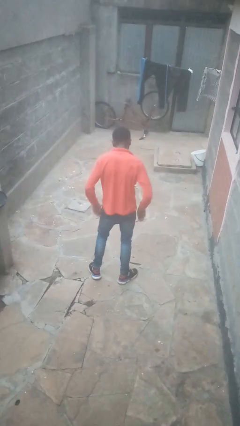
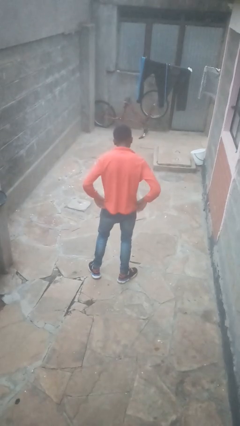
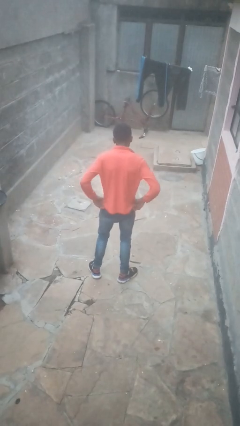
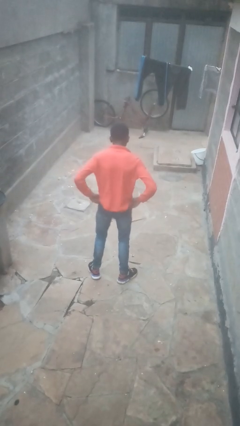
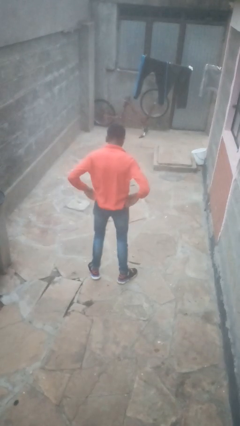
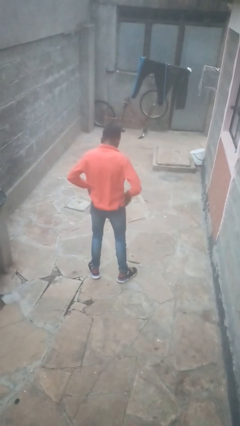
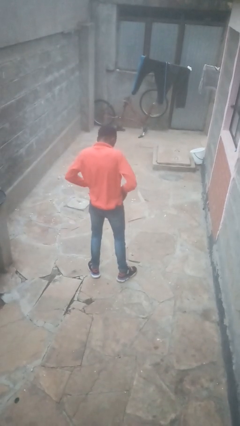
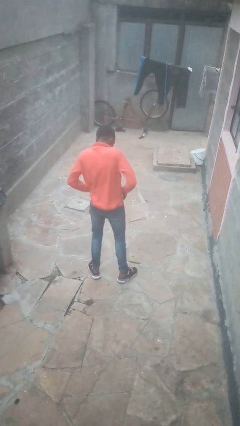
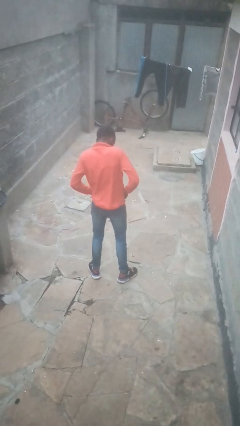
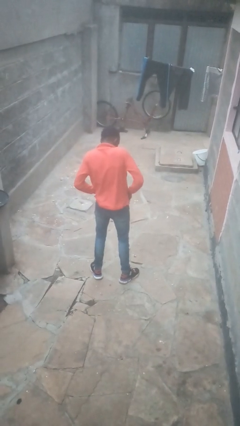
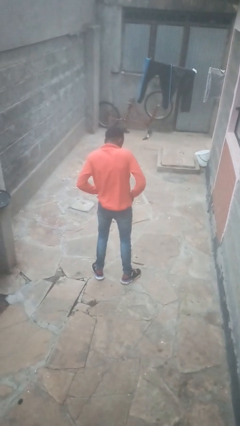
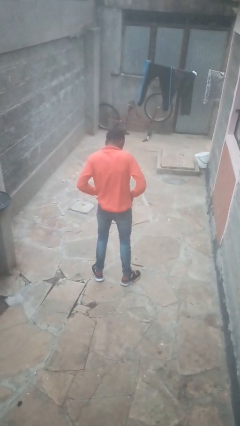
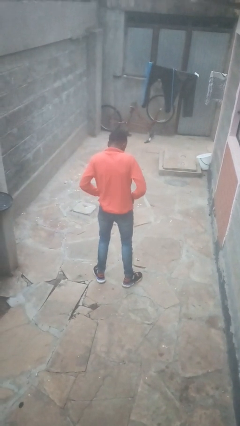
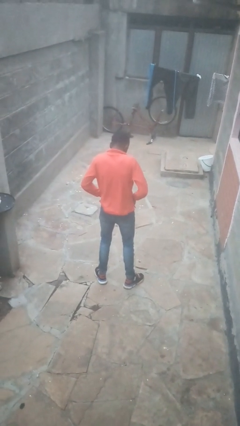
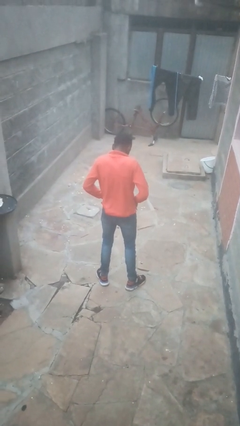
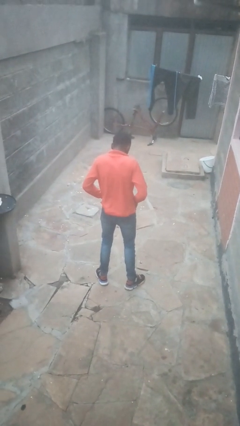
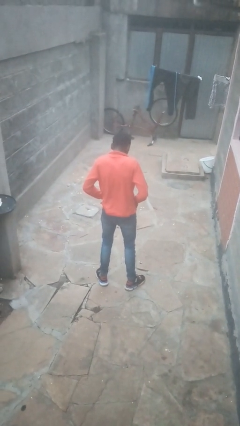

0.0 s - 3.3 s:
person puts hands in back pockets

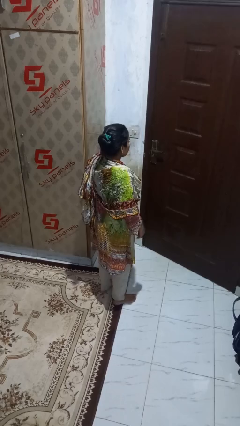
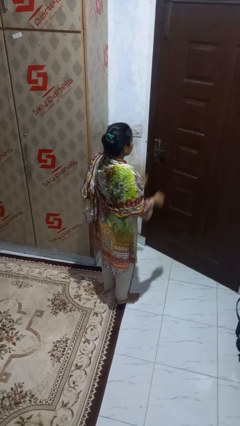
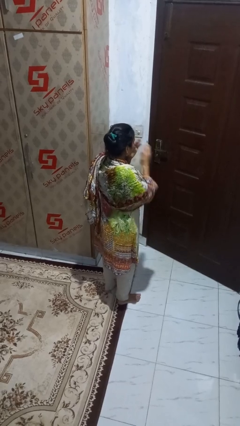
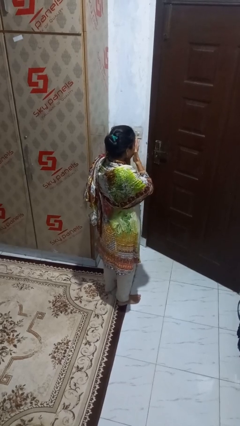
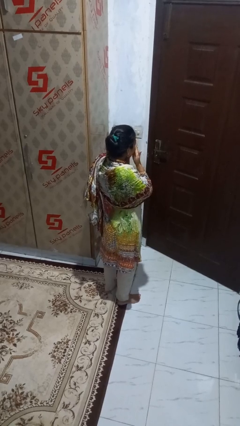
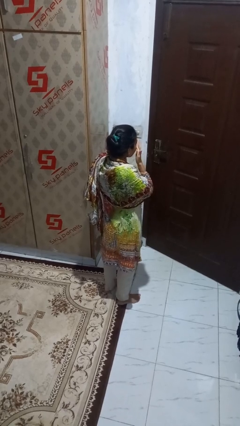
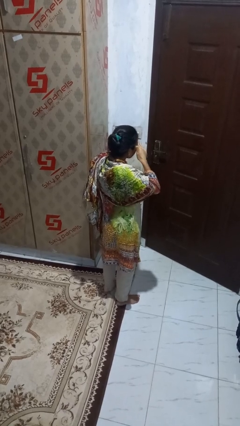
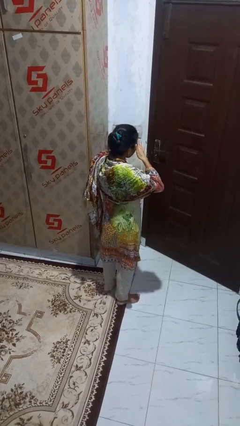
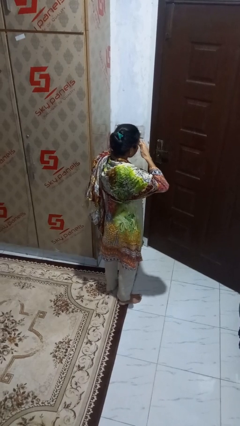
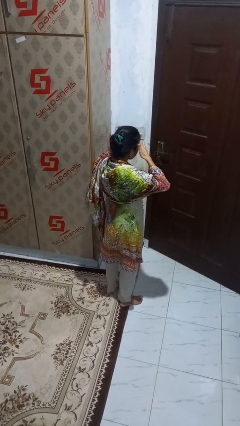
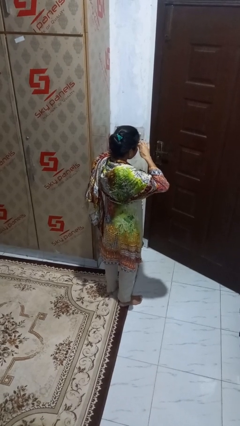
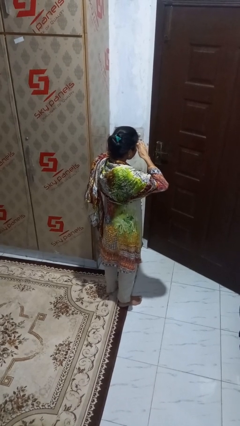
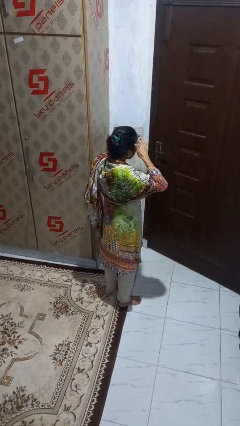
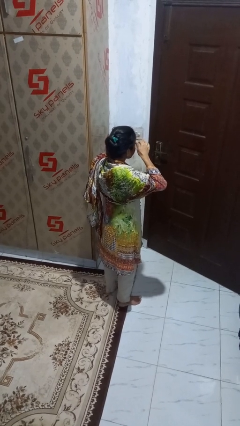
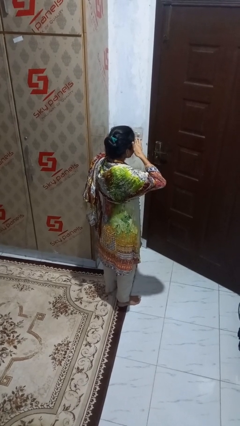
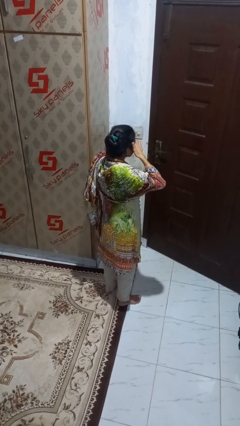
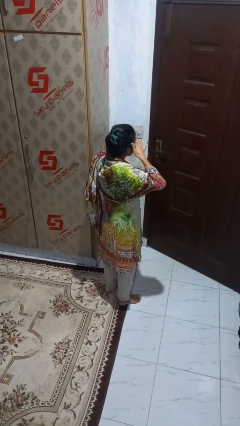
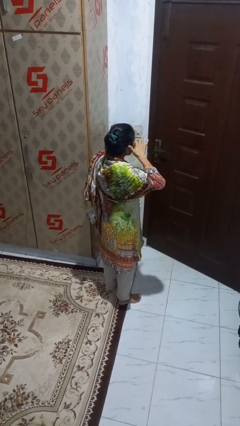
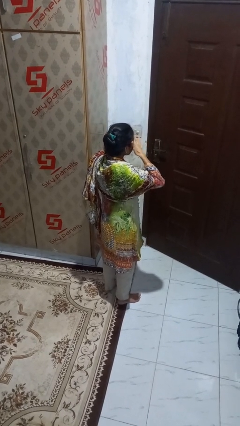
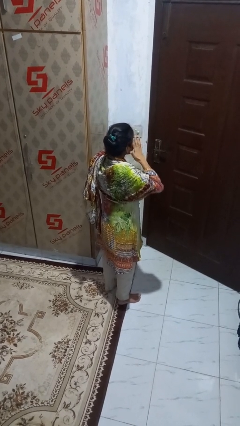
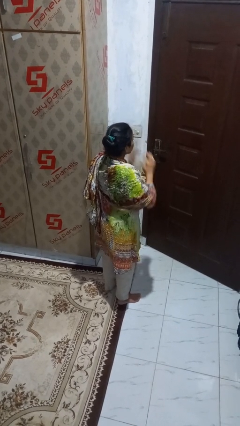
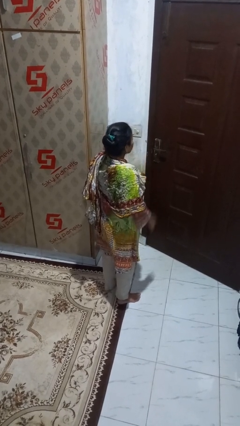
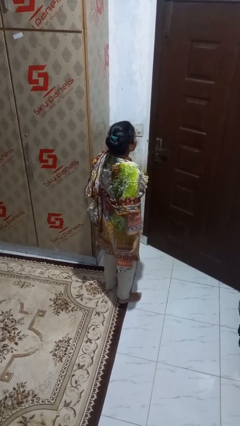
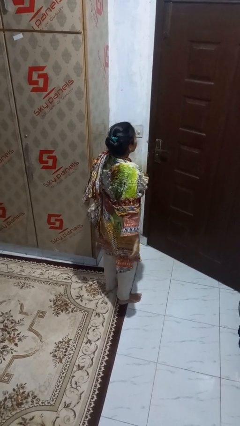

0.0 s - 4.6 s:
person rubs eyes

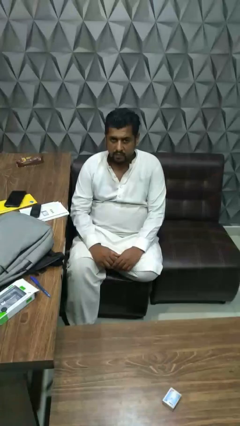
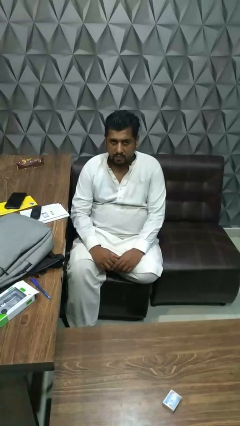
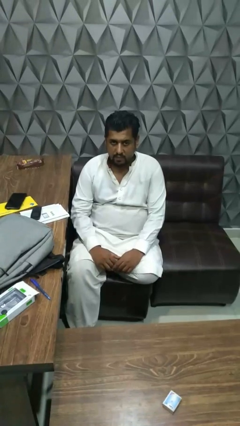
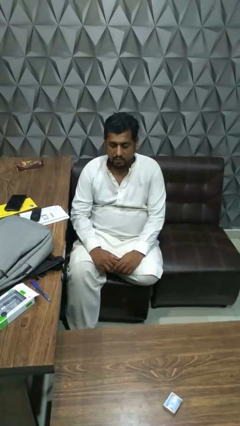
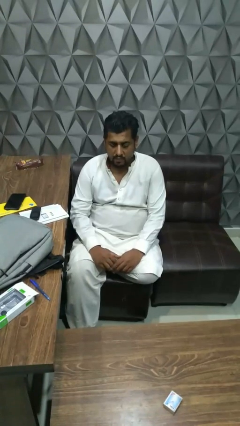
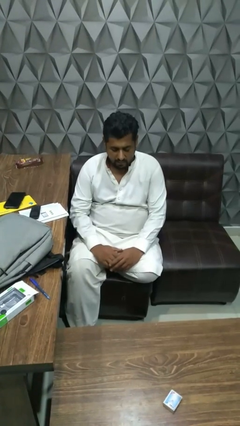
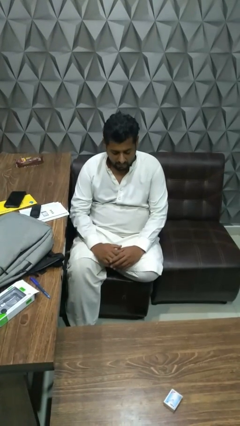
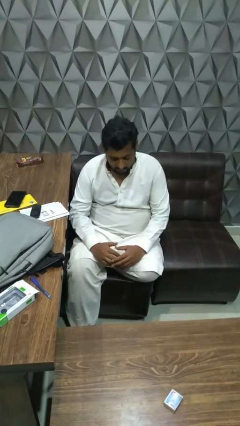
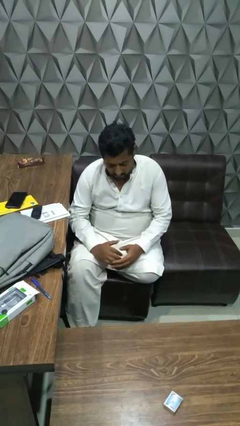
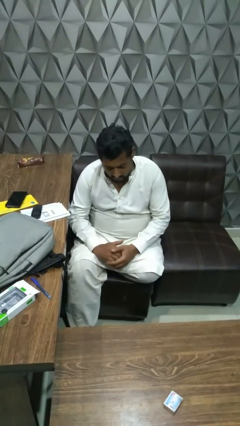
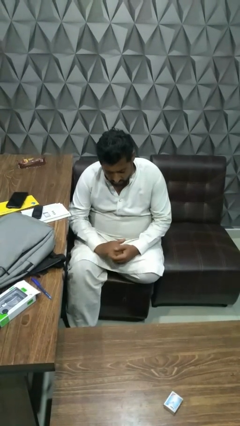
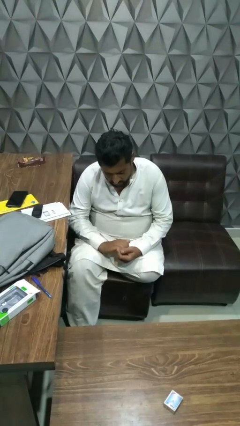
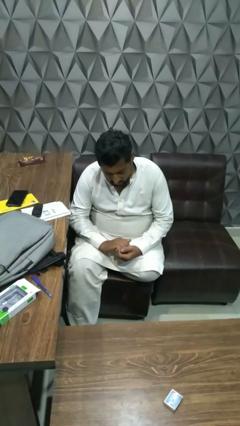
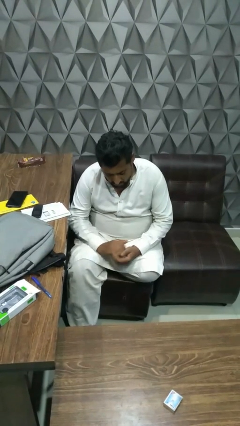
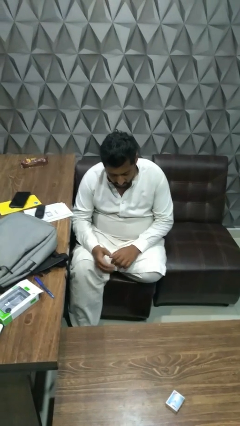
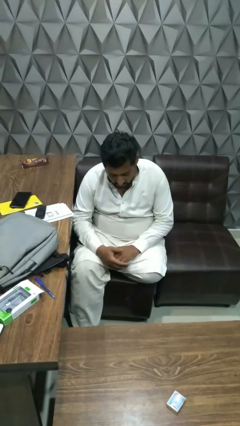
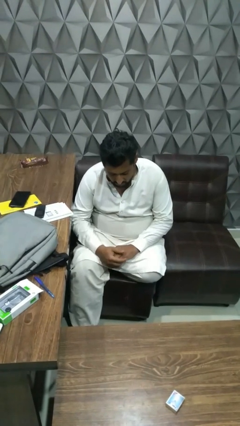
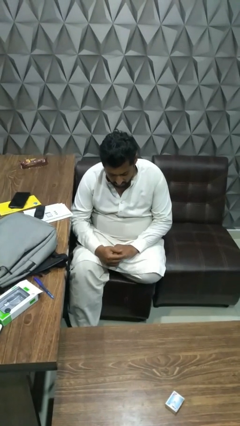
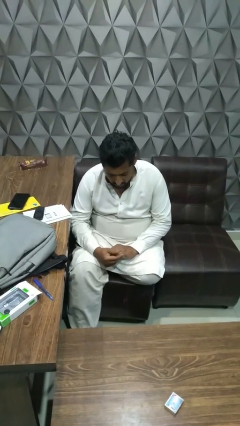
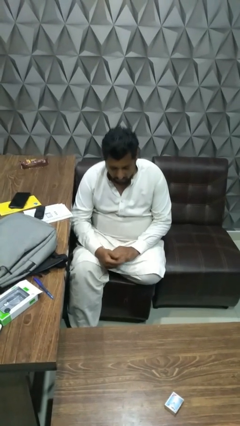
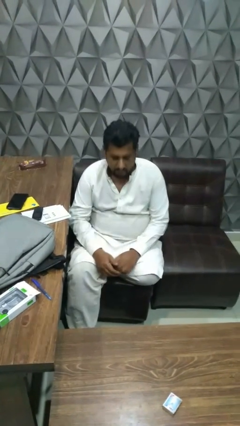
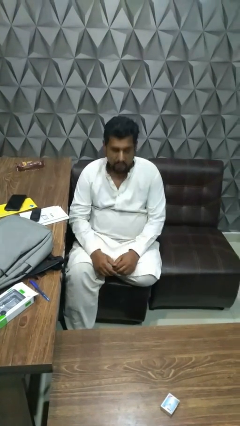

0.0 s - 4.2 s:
person looks at hands in lap

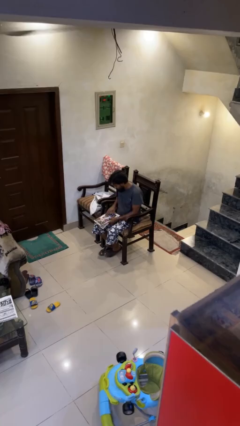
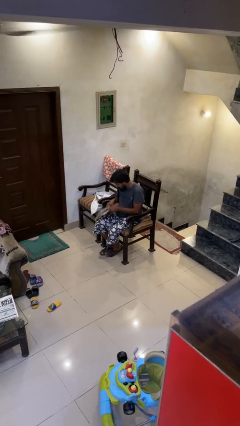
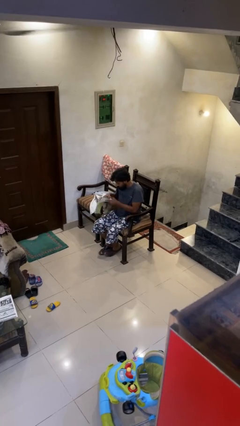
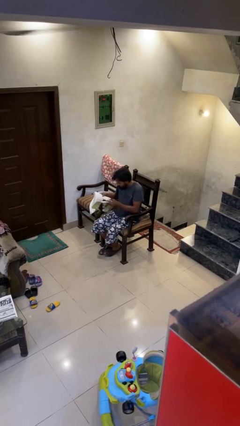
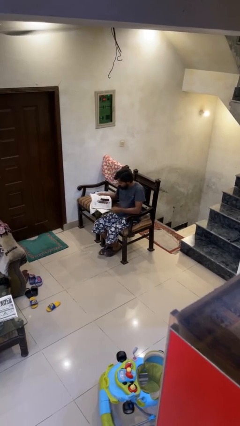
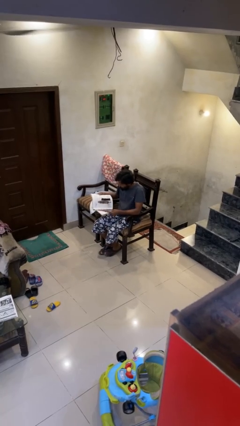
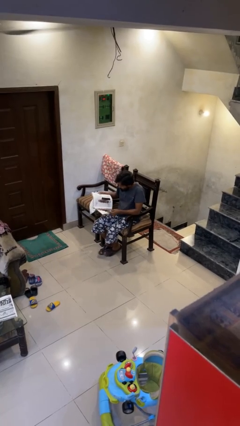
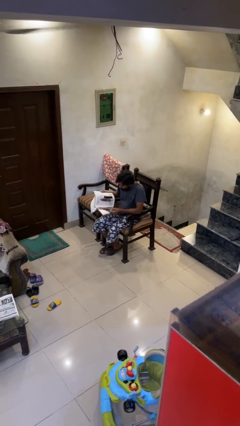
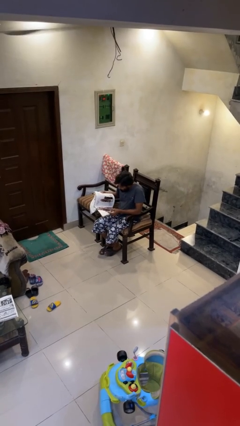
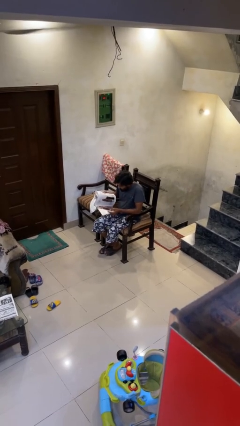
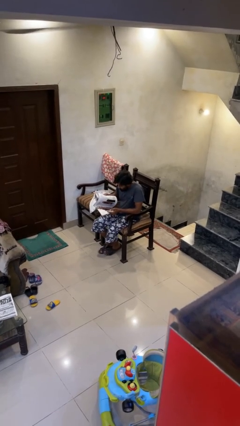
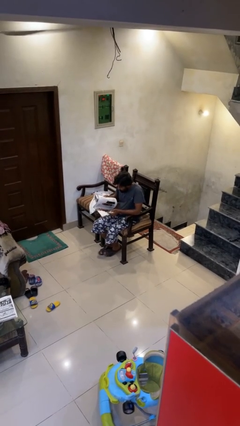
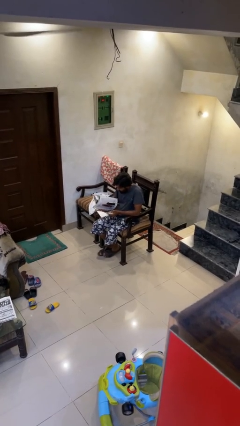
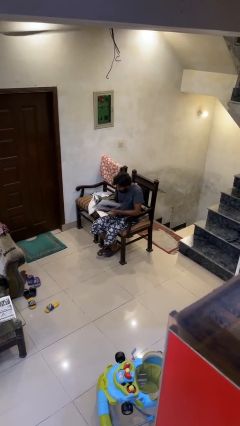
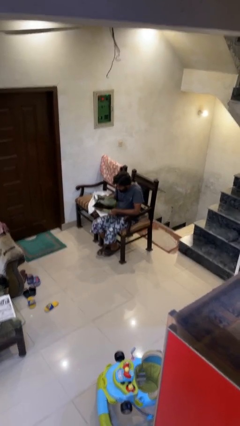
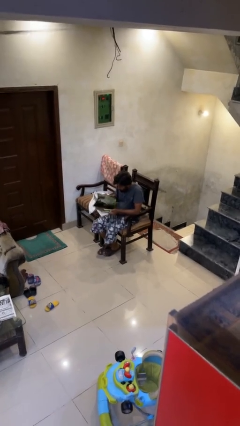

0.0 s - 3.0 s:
person reads magazine

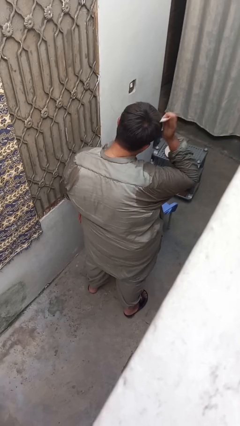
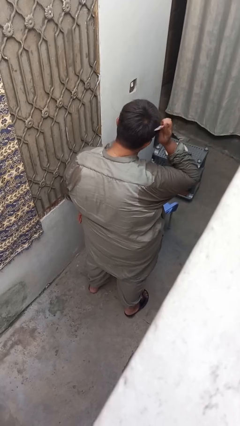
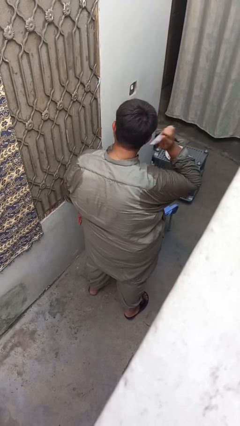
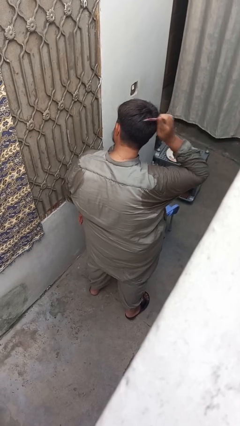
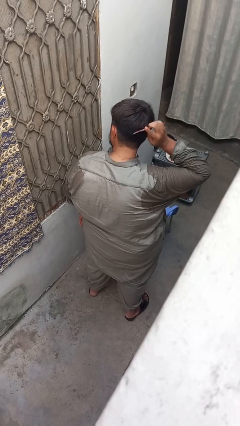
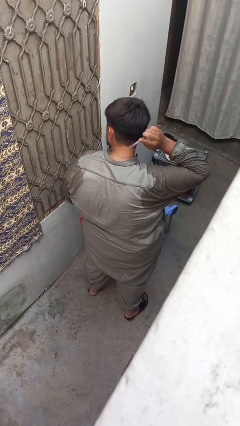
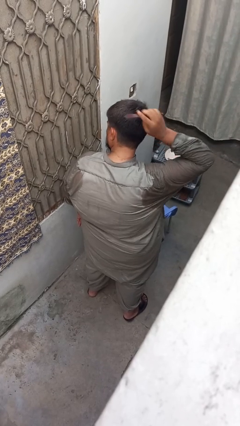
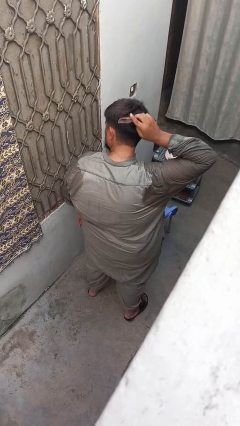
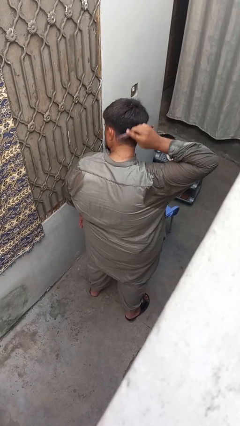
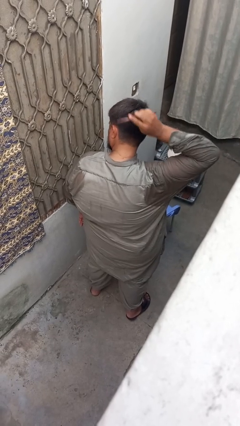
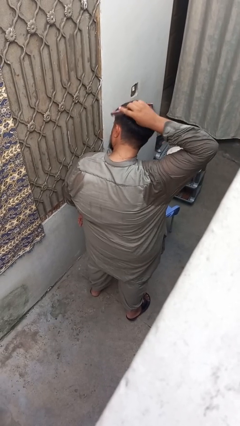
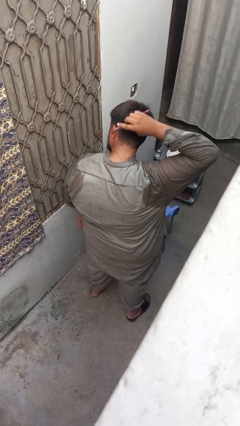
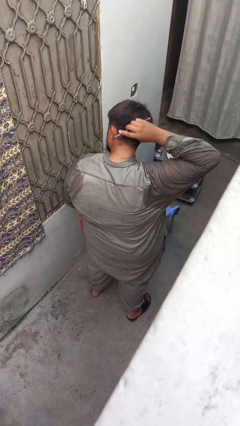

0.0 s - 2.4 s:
person brushes hair

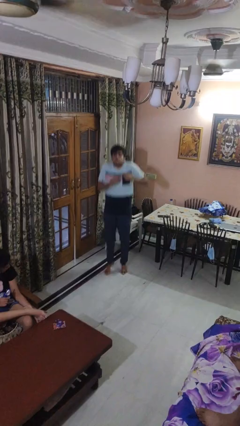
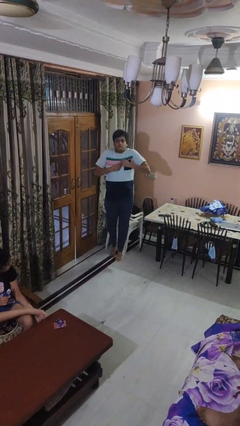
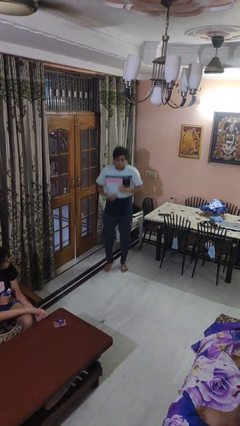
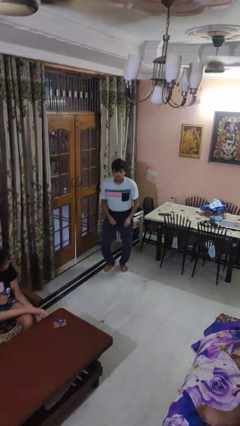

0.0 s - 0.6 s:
person jumps
